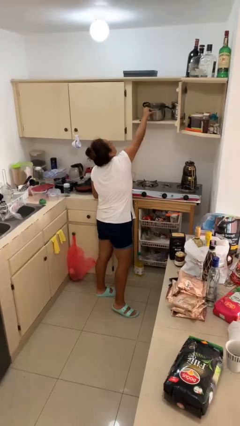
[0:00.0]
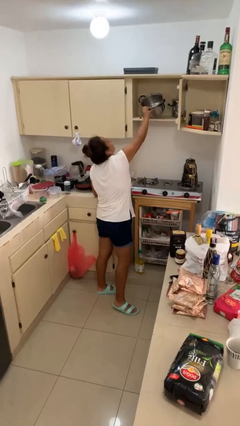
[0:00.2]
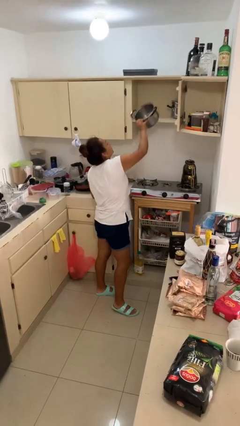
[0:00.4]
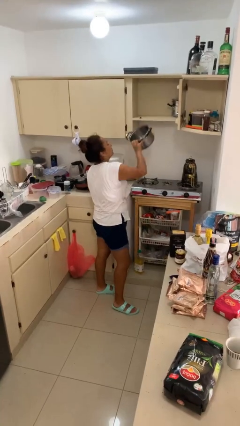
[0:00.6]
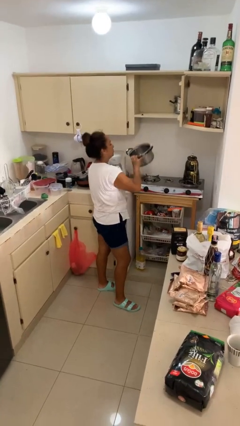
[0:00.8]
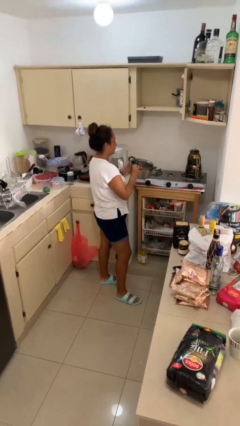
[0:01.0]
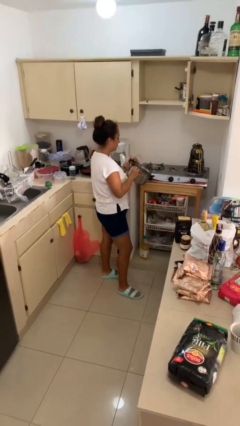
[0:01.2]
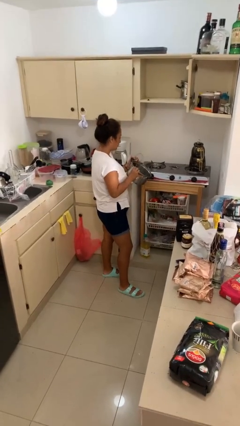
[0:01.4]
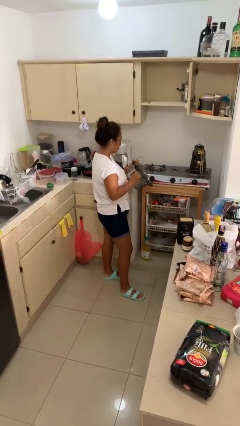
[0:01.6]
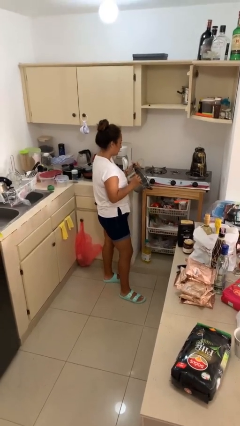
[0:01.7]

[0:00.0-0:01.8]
person picks up object from cabinet

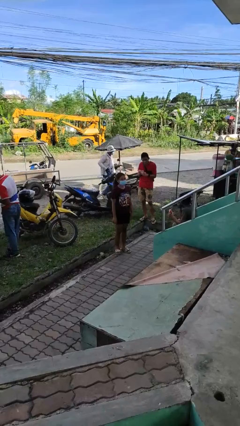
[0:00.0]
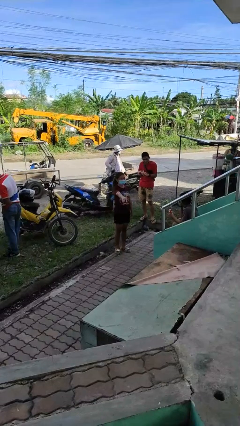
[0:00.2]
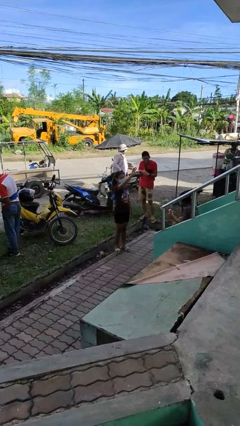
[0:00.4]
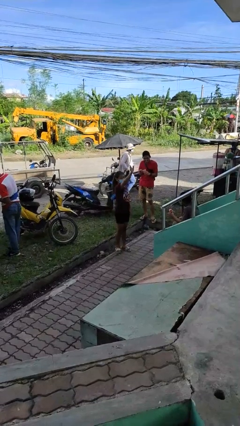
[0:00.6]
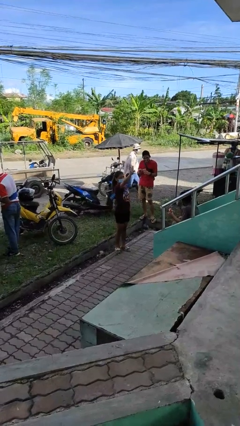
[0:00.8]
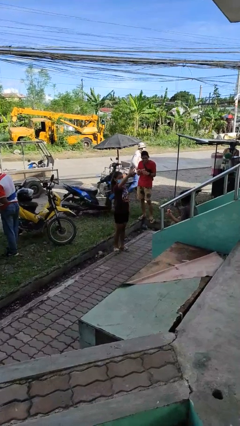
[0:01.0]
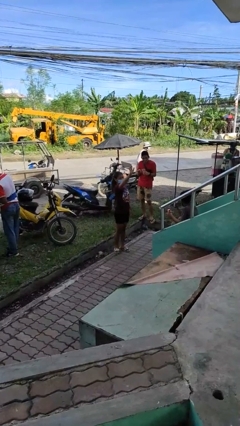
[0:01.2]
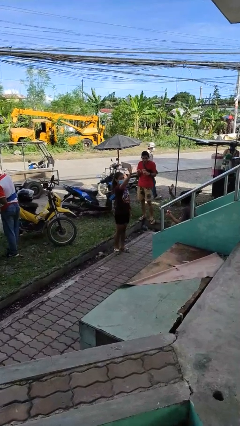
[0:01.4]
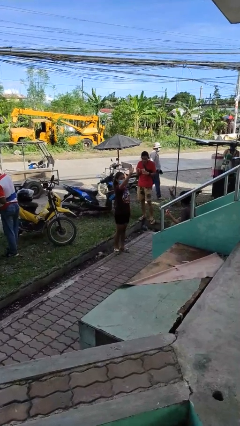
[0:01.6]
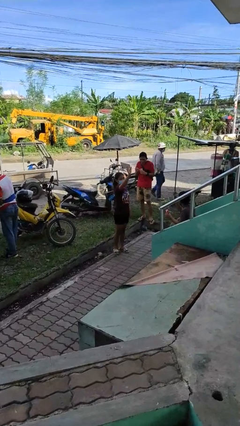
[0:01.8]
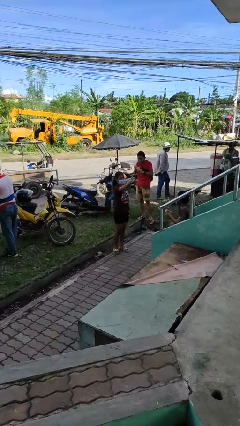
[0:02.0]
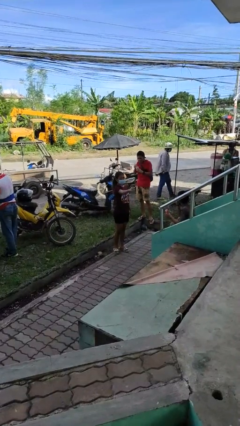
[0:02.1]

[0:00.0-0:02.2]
person waves at person

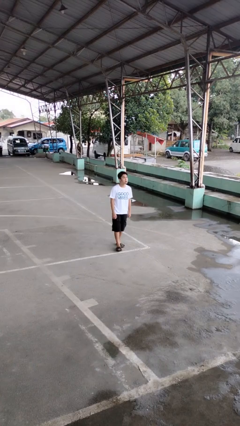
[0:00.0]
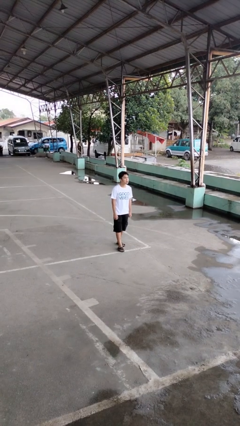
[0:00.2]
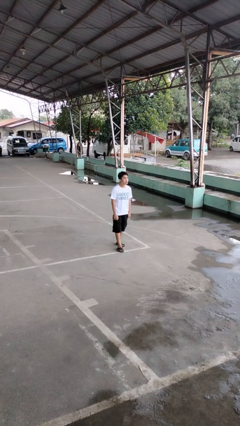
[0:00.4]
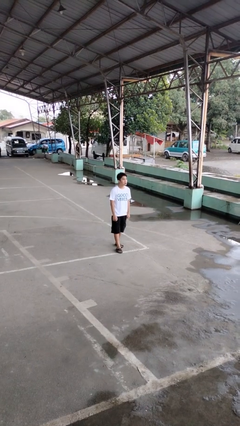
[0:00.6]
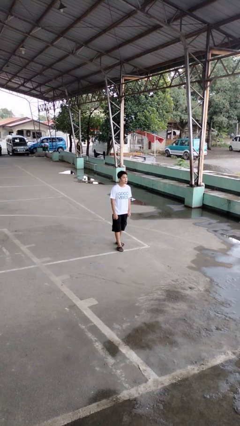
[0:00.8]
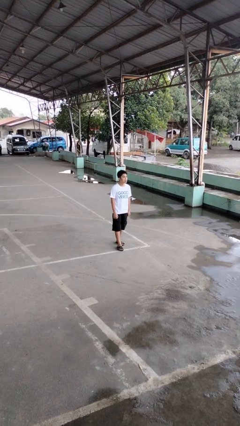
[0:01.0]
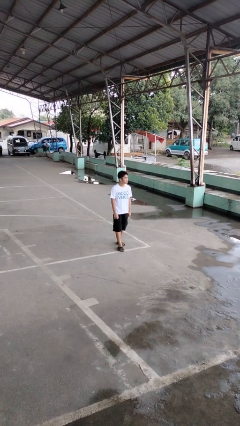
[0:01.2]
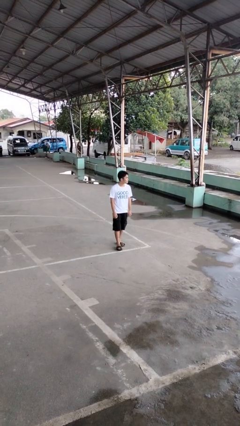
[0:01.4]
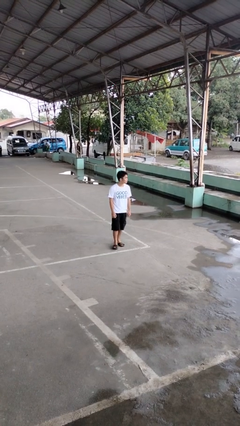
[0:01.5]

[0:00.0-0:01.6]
person sticks out tongue

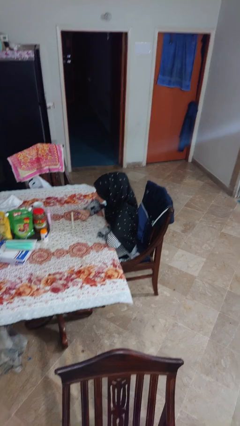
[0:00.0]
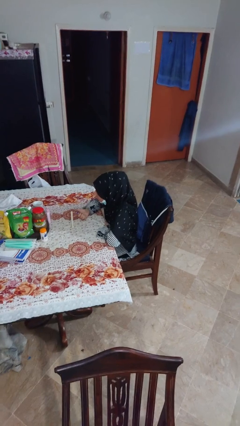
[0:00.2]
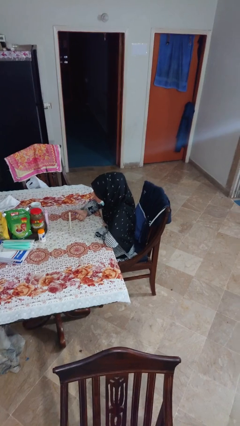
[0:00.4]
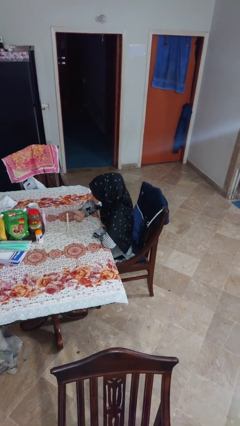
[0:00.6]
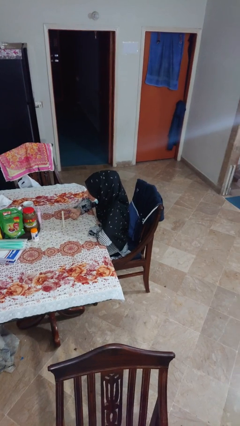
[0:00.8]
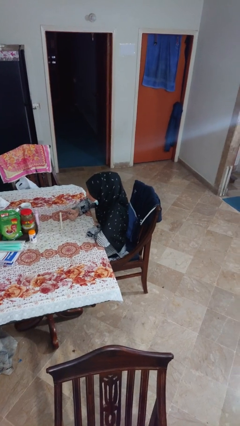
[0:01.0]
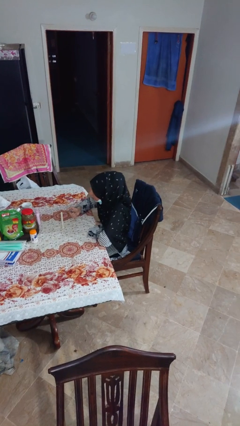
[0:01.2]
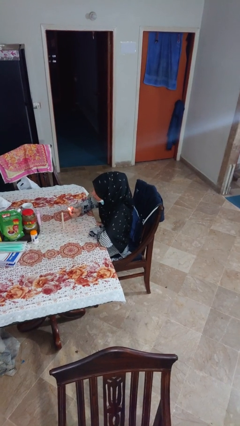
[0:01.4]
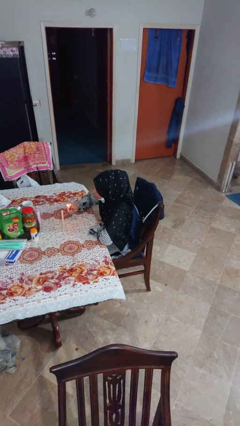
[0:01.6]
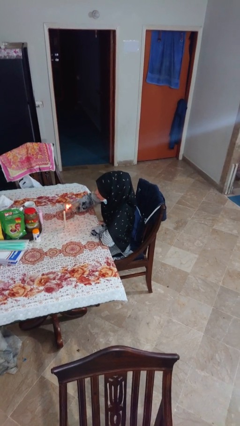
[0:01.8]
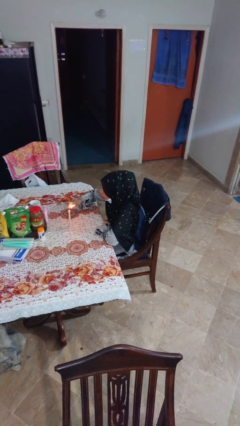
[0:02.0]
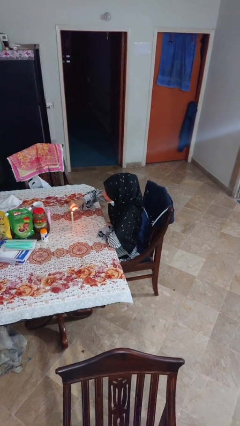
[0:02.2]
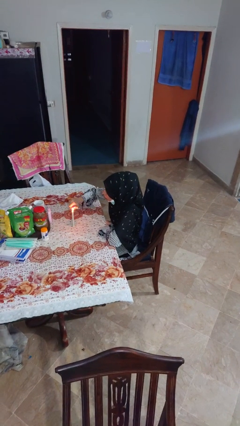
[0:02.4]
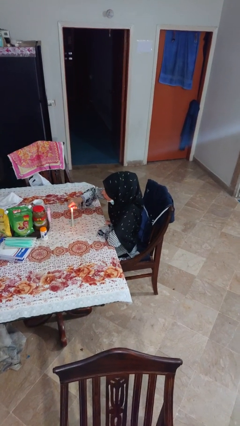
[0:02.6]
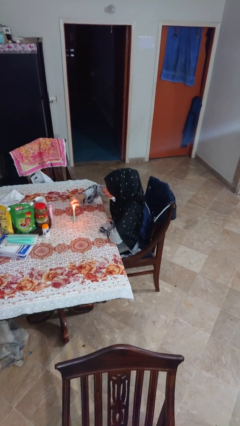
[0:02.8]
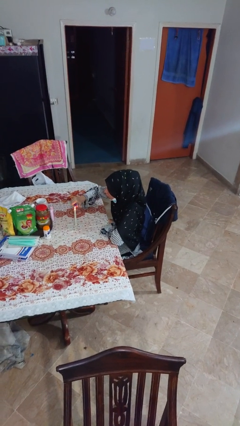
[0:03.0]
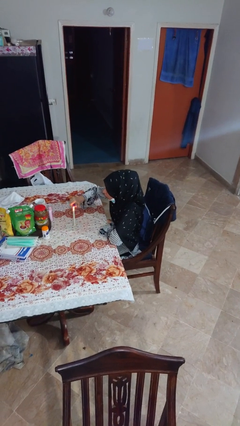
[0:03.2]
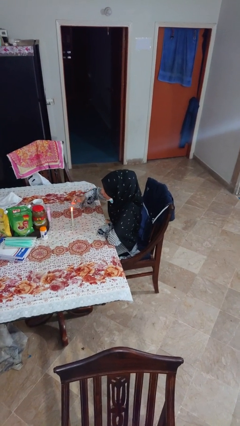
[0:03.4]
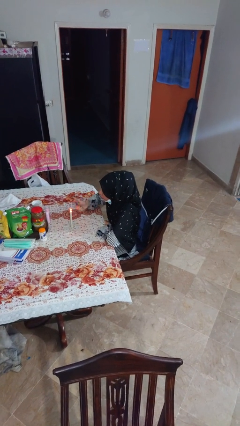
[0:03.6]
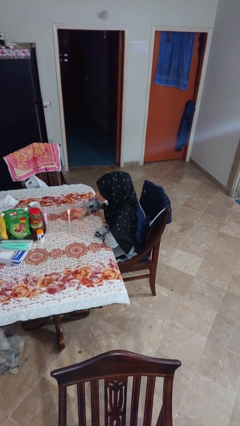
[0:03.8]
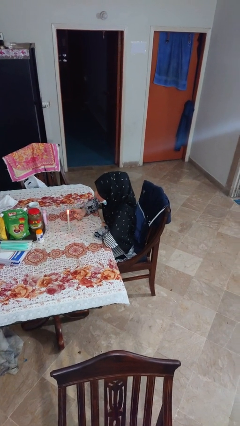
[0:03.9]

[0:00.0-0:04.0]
person lights candle

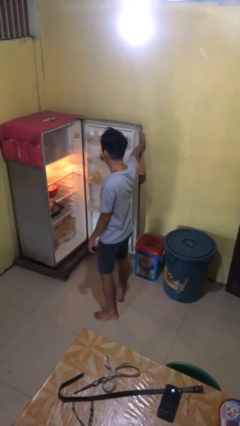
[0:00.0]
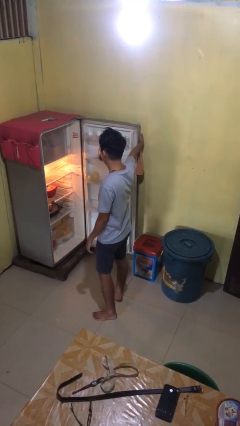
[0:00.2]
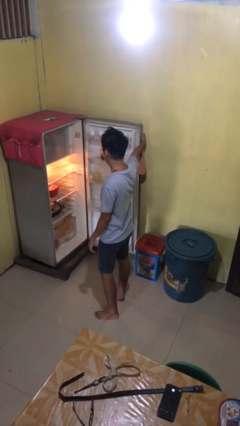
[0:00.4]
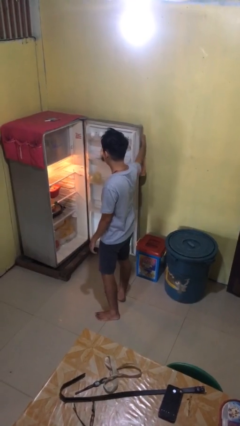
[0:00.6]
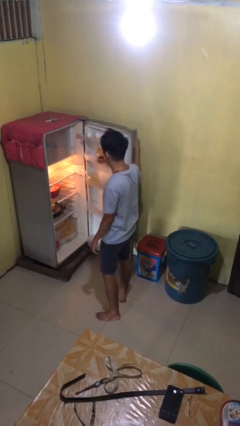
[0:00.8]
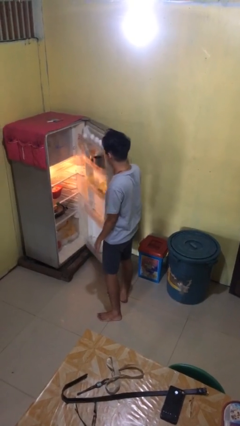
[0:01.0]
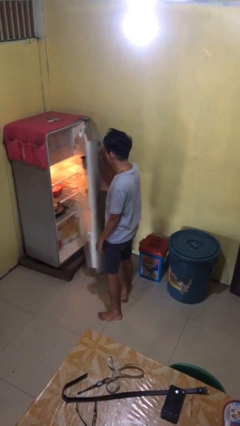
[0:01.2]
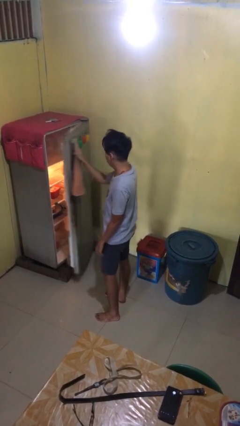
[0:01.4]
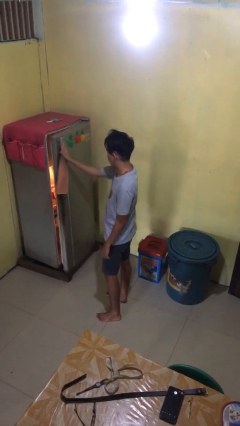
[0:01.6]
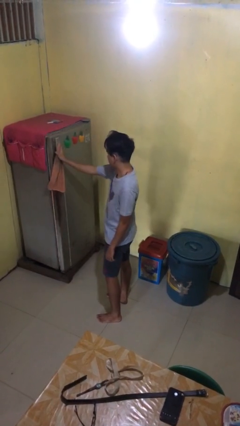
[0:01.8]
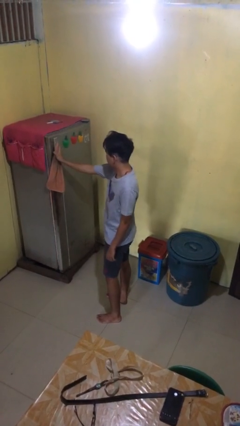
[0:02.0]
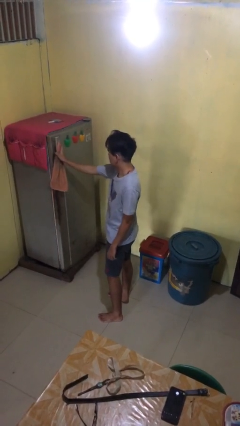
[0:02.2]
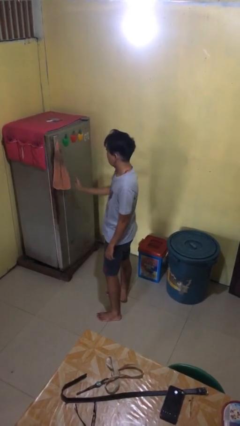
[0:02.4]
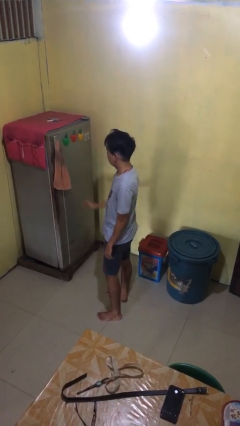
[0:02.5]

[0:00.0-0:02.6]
person closes refrigerator

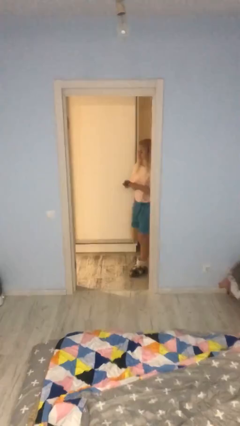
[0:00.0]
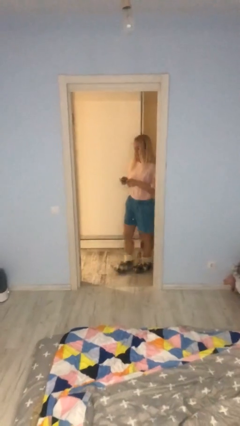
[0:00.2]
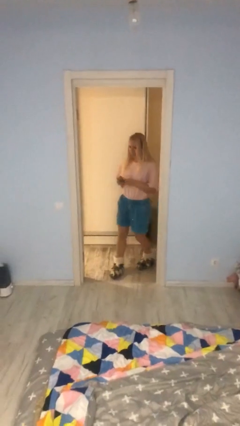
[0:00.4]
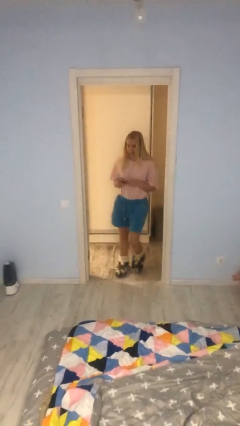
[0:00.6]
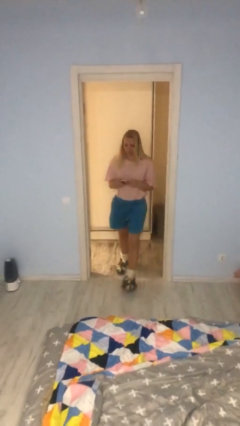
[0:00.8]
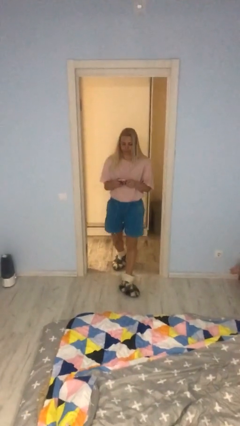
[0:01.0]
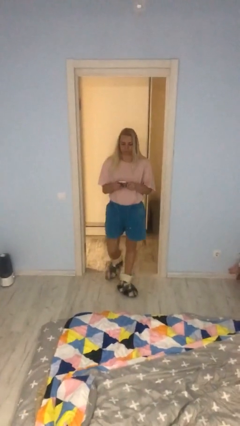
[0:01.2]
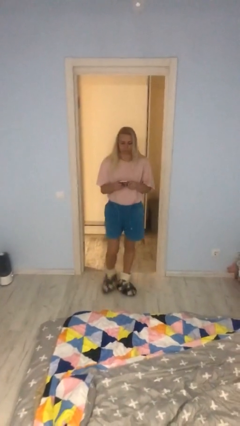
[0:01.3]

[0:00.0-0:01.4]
person enters scene through structure

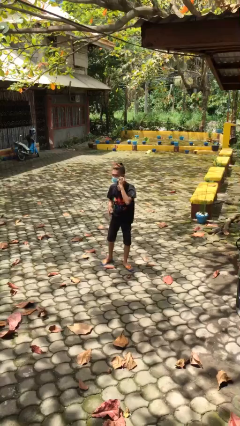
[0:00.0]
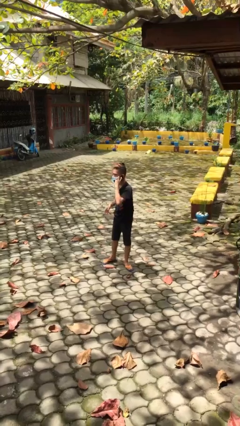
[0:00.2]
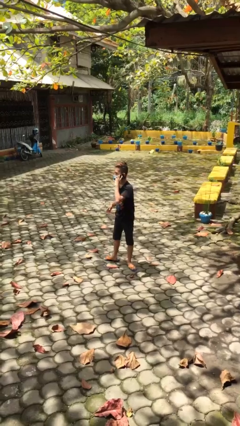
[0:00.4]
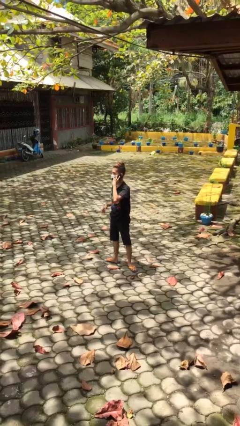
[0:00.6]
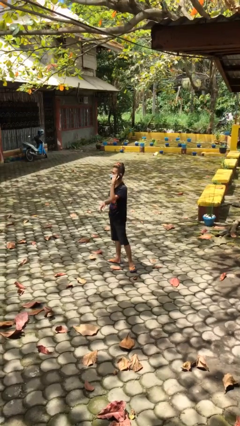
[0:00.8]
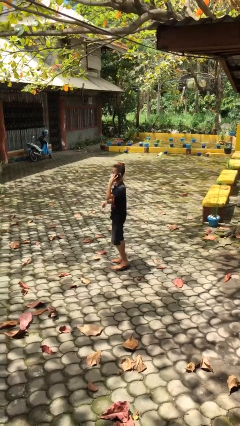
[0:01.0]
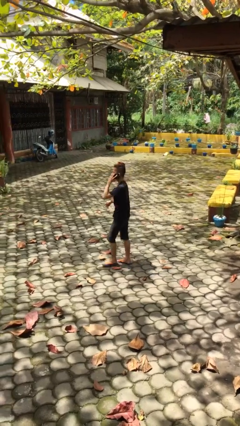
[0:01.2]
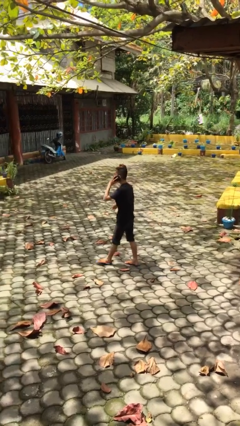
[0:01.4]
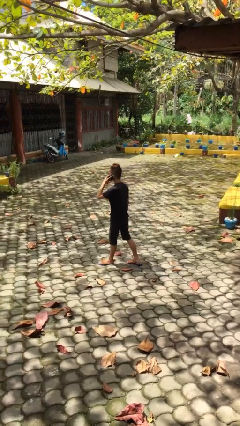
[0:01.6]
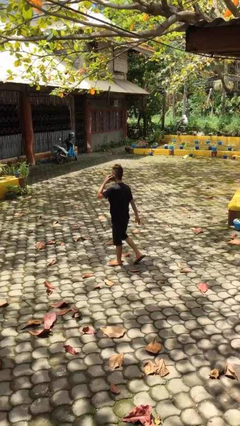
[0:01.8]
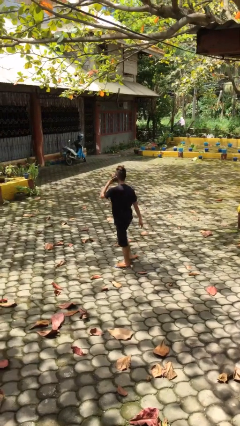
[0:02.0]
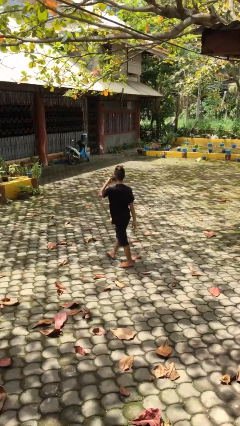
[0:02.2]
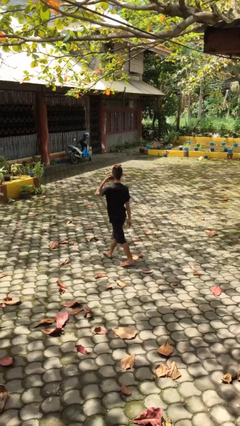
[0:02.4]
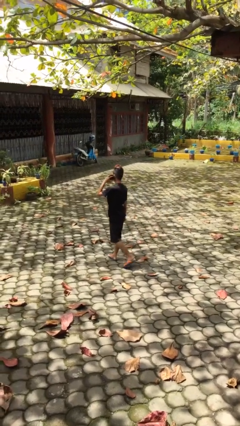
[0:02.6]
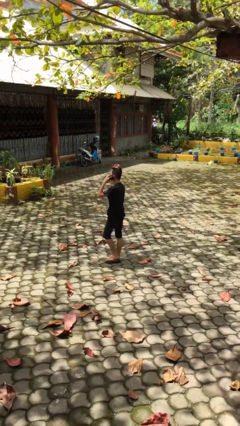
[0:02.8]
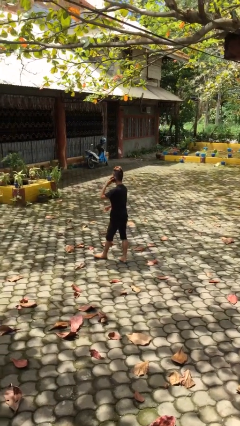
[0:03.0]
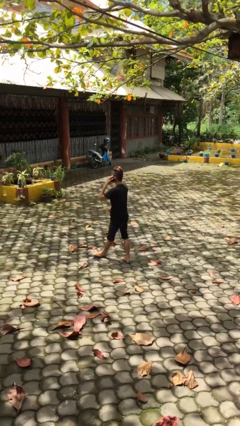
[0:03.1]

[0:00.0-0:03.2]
person talks on phone
